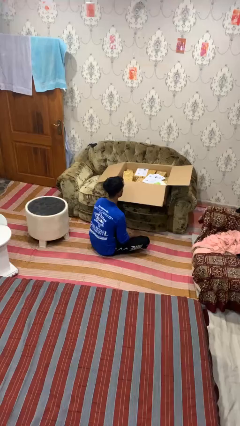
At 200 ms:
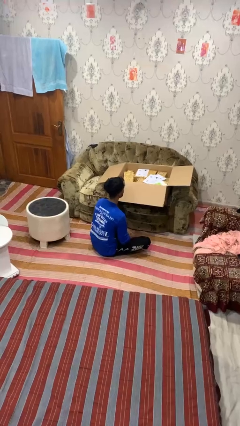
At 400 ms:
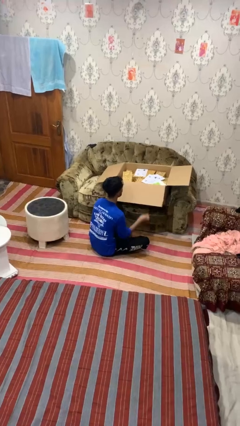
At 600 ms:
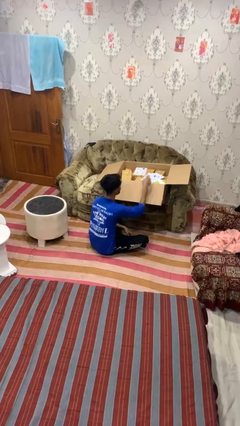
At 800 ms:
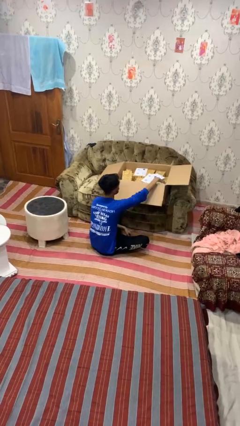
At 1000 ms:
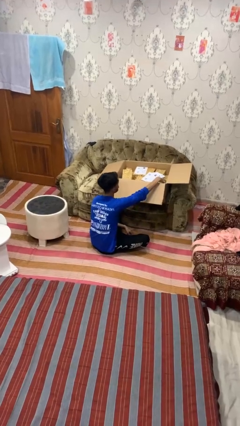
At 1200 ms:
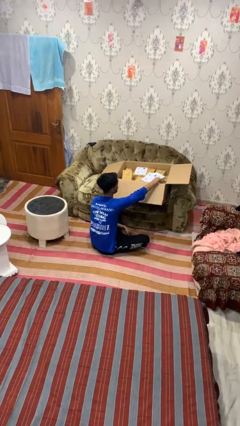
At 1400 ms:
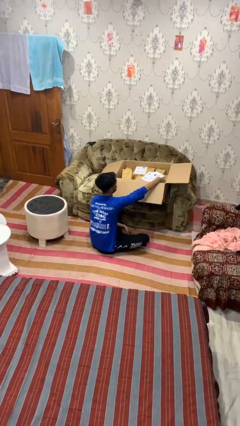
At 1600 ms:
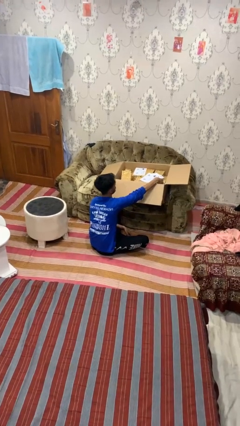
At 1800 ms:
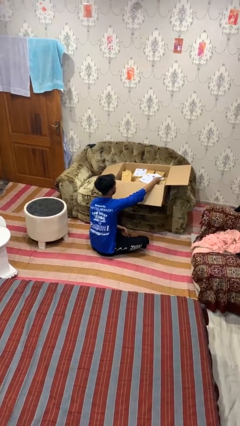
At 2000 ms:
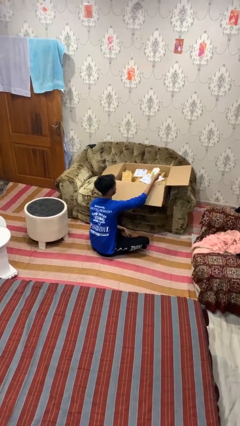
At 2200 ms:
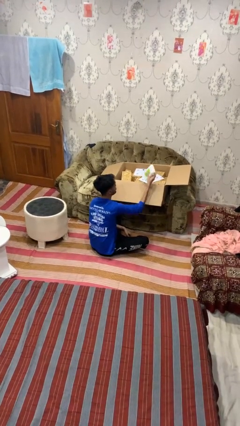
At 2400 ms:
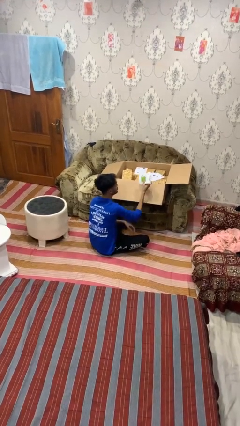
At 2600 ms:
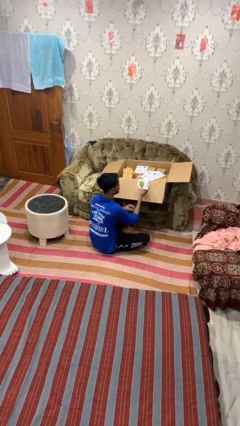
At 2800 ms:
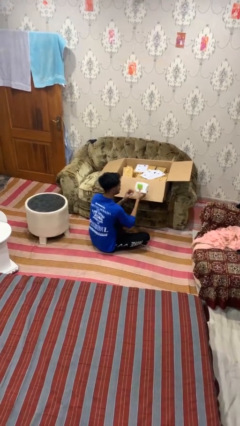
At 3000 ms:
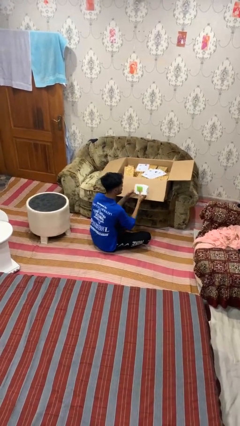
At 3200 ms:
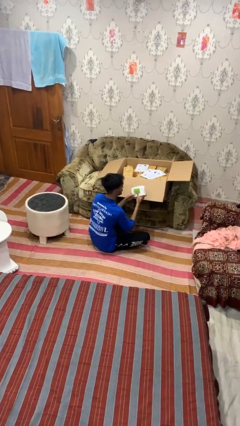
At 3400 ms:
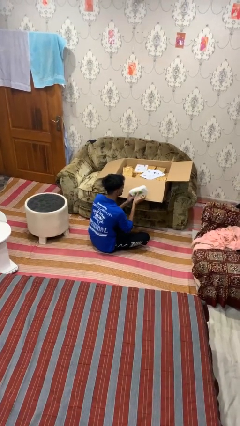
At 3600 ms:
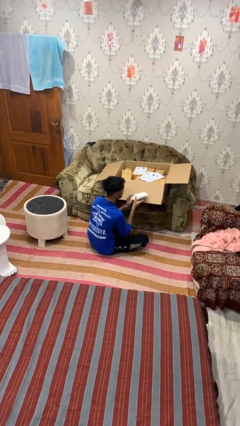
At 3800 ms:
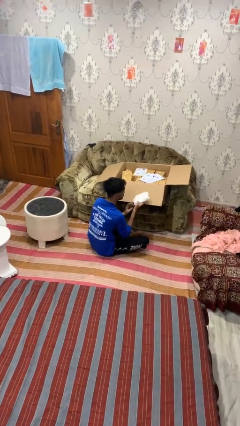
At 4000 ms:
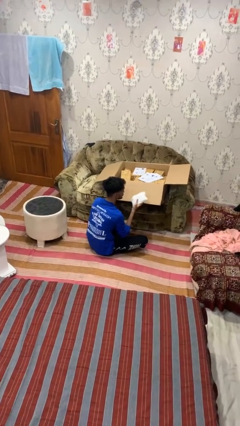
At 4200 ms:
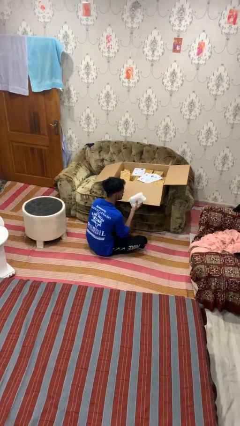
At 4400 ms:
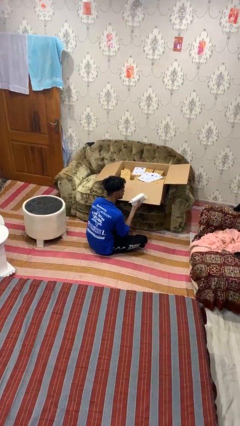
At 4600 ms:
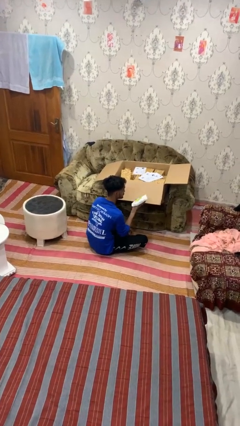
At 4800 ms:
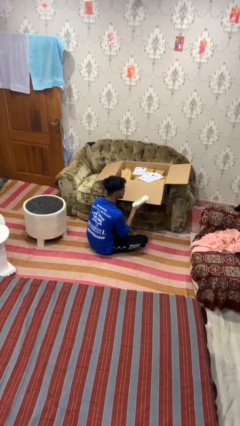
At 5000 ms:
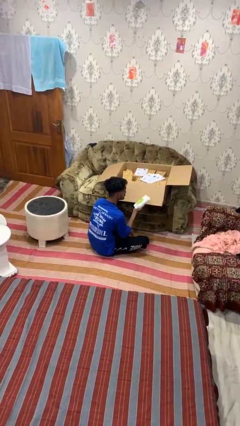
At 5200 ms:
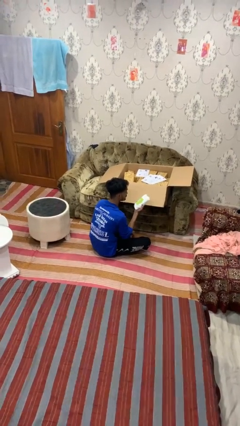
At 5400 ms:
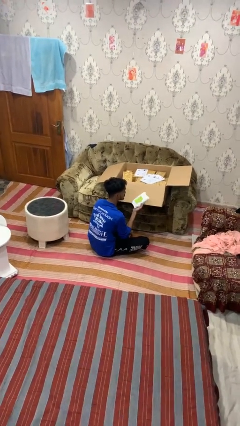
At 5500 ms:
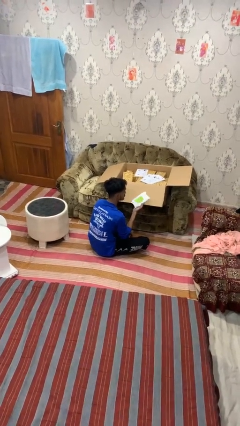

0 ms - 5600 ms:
person takes object from box

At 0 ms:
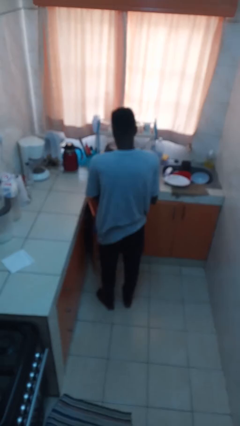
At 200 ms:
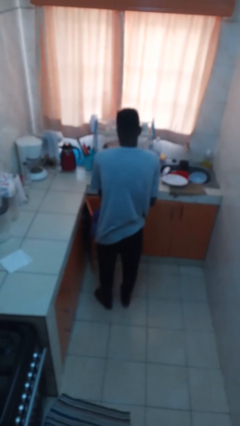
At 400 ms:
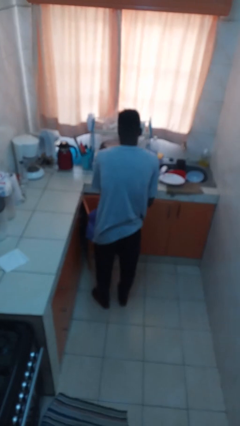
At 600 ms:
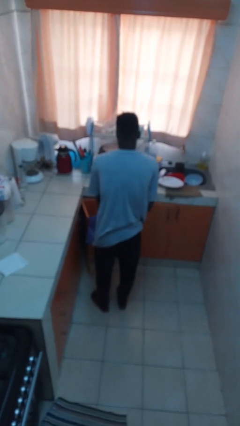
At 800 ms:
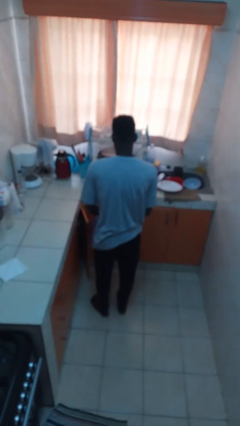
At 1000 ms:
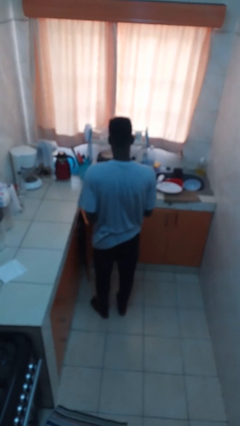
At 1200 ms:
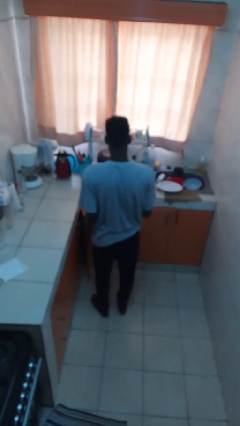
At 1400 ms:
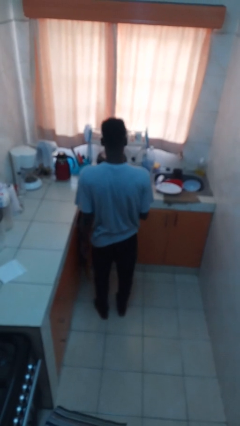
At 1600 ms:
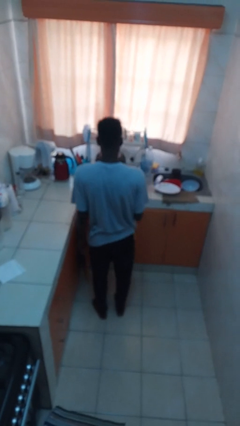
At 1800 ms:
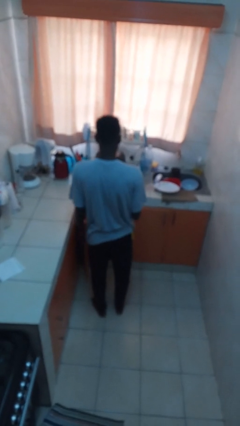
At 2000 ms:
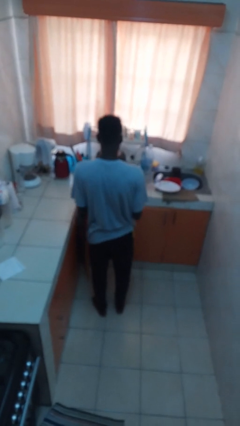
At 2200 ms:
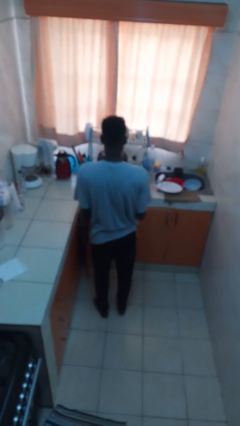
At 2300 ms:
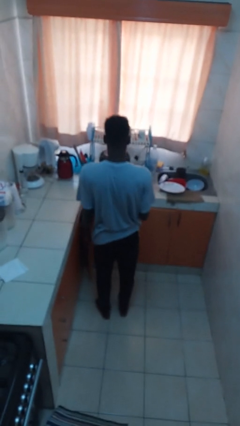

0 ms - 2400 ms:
person puts object into bag

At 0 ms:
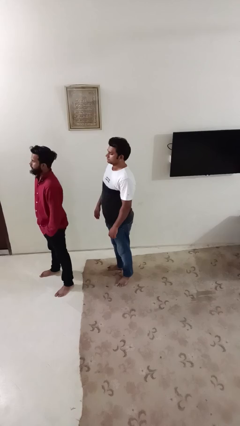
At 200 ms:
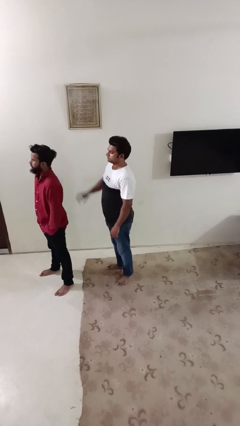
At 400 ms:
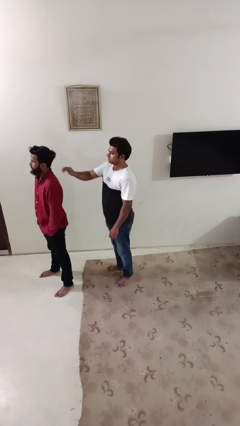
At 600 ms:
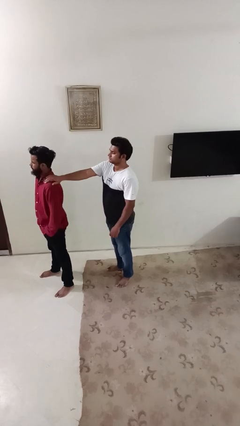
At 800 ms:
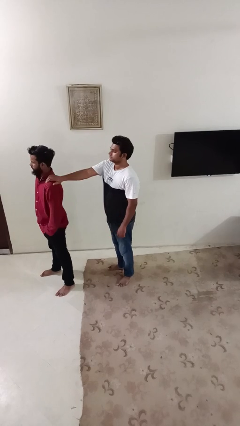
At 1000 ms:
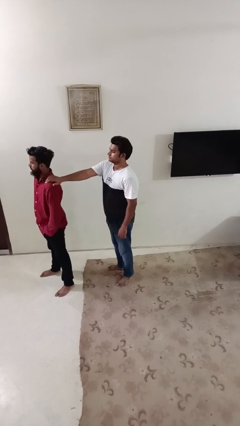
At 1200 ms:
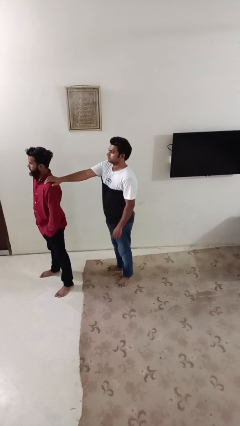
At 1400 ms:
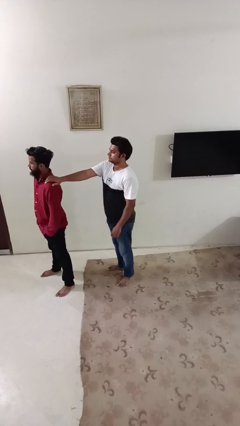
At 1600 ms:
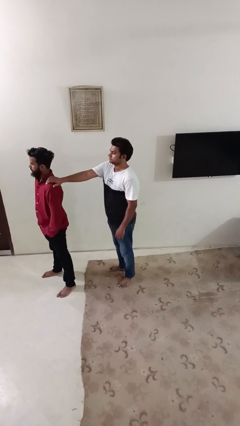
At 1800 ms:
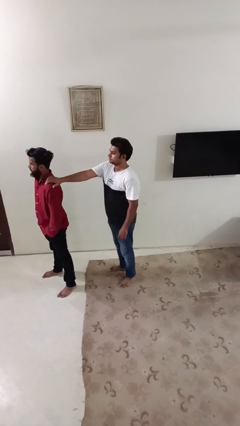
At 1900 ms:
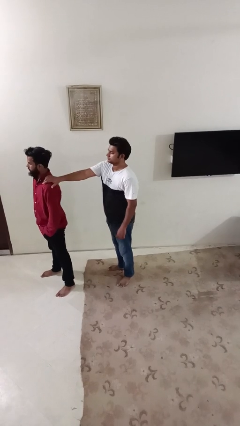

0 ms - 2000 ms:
person grabs person by shoulder

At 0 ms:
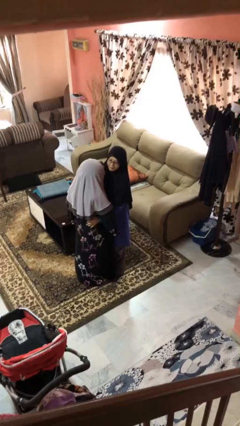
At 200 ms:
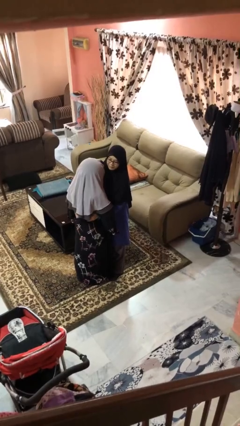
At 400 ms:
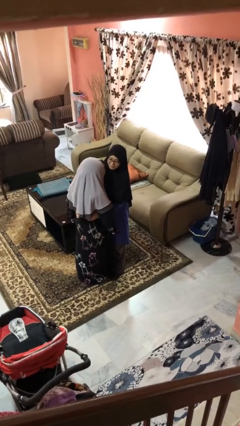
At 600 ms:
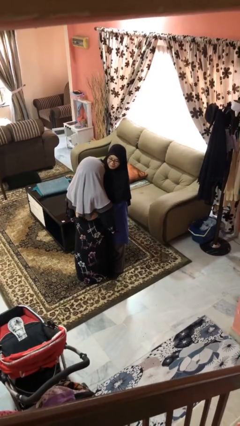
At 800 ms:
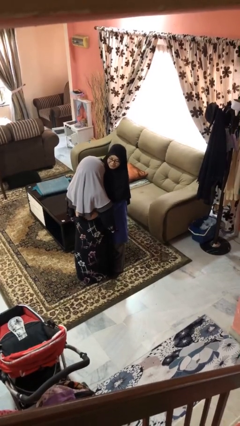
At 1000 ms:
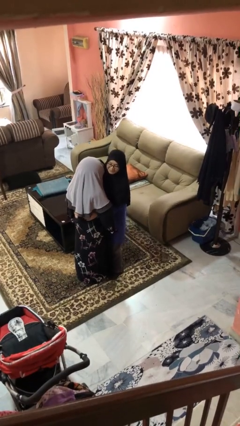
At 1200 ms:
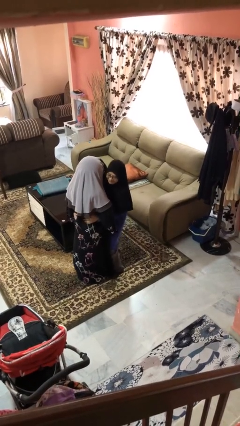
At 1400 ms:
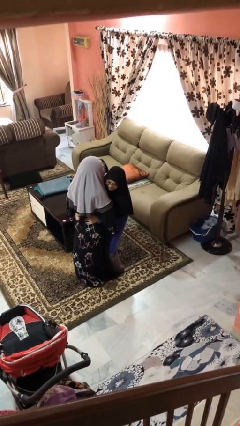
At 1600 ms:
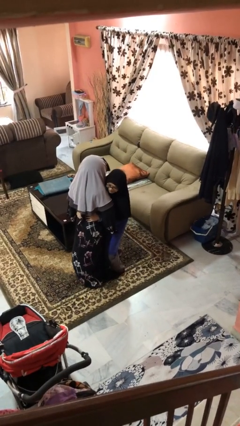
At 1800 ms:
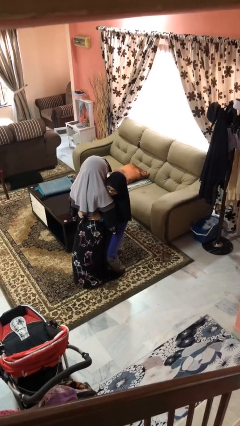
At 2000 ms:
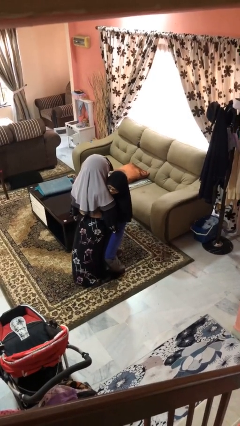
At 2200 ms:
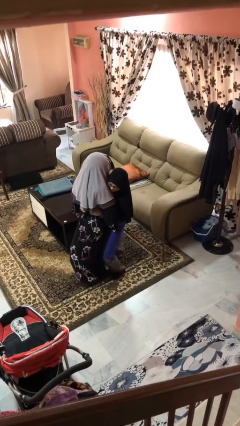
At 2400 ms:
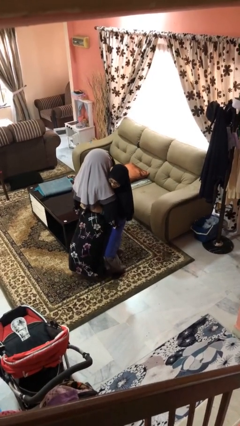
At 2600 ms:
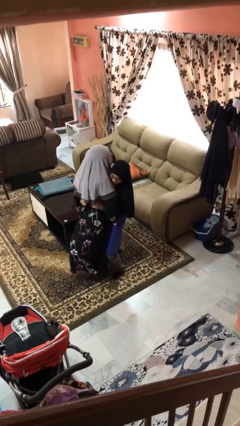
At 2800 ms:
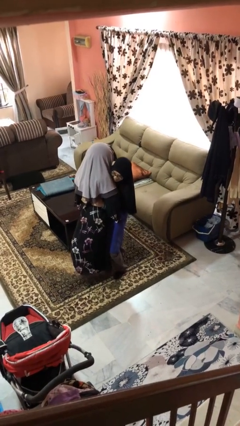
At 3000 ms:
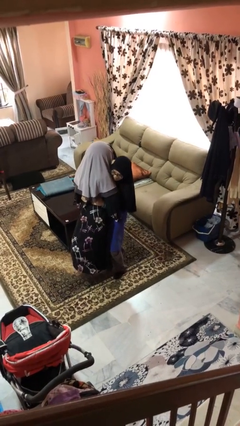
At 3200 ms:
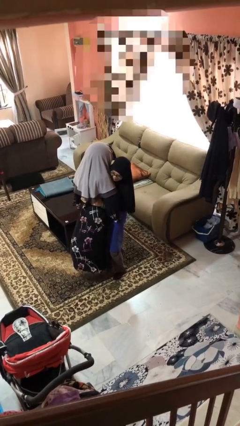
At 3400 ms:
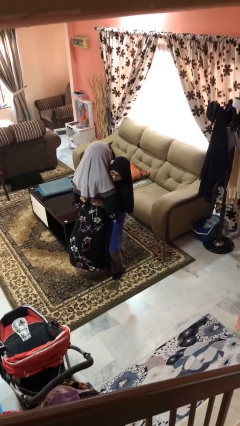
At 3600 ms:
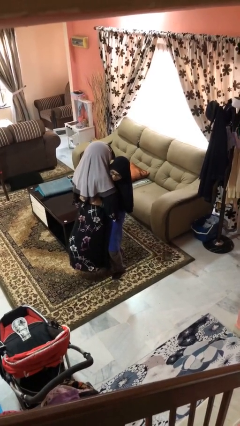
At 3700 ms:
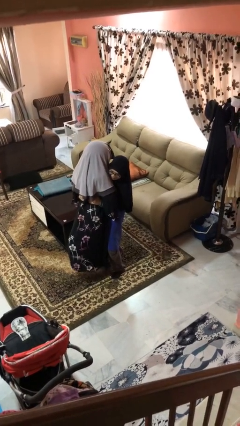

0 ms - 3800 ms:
person picks up person

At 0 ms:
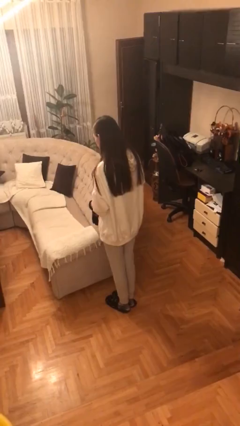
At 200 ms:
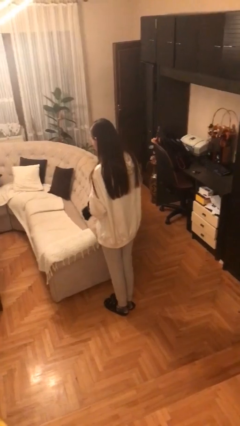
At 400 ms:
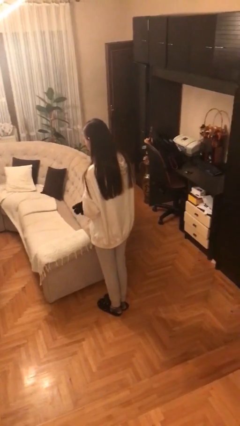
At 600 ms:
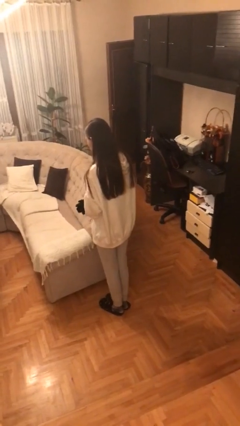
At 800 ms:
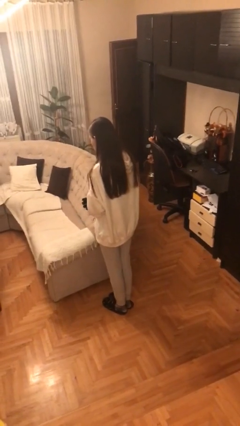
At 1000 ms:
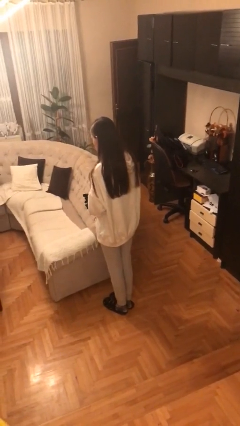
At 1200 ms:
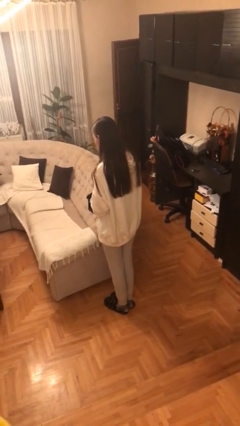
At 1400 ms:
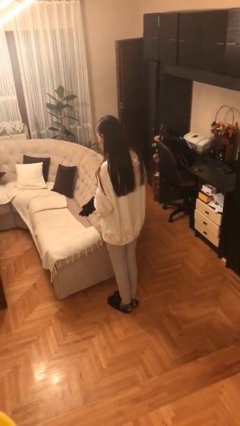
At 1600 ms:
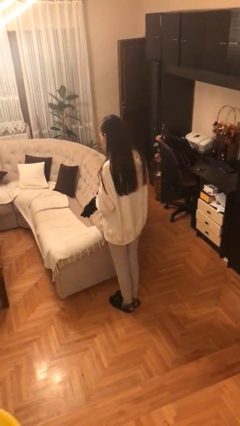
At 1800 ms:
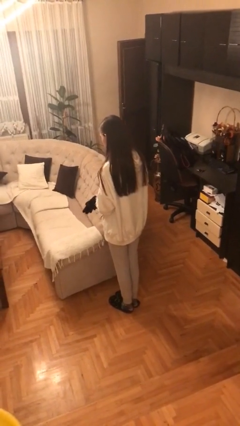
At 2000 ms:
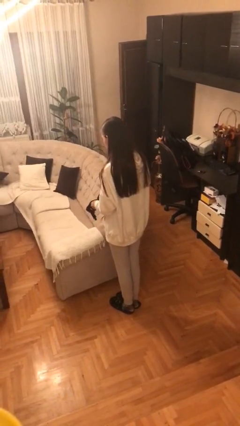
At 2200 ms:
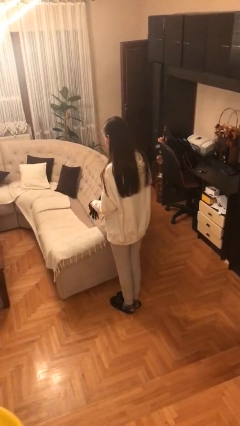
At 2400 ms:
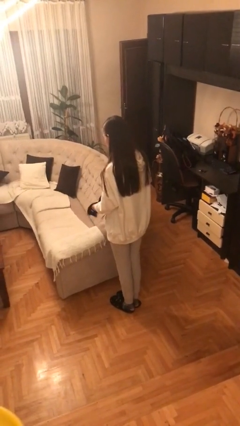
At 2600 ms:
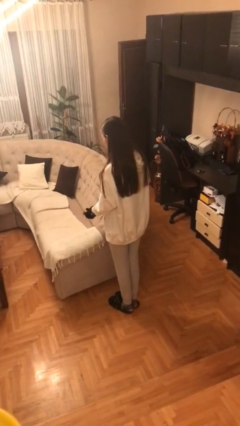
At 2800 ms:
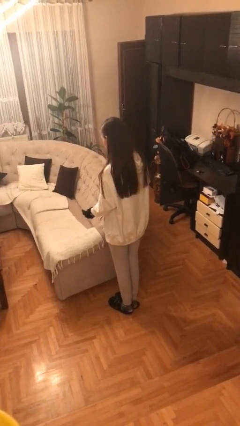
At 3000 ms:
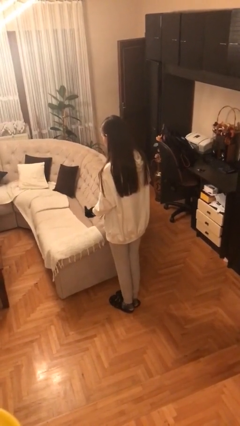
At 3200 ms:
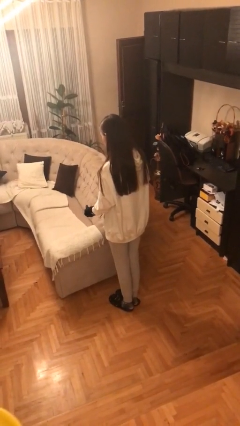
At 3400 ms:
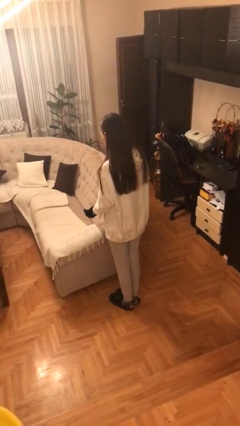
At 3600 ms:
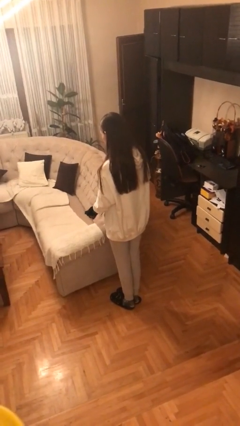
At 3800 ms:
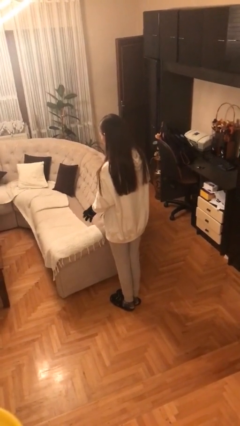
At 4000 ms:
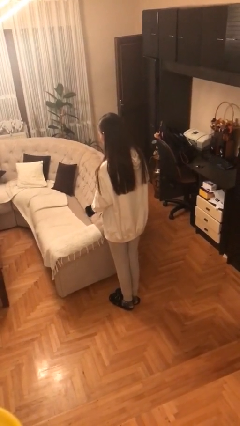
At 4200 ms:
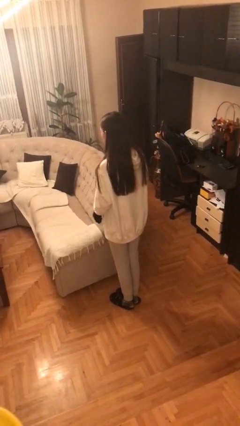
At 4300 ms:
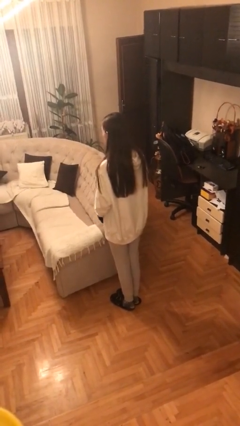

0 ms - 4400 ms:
person puts on gloves
